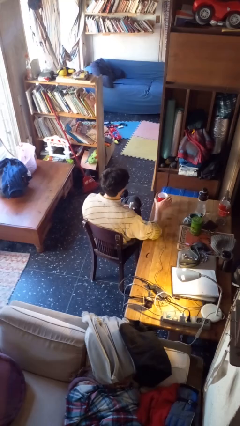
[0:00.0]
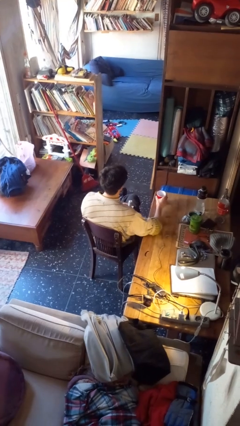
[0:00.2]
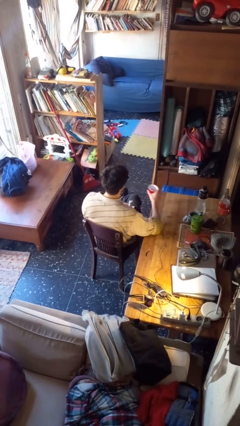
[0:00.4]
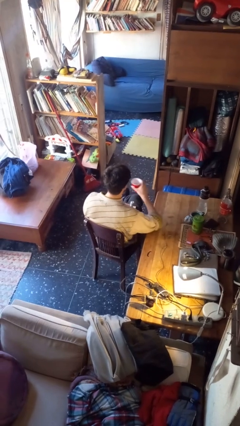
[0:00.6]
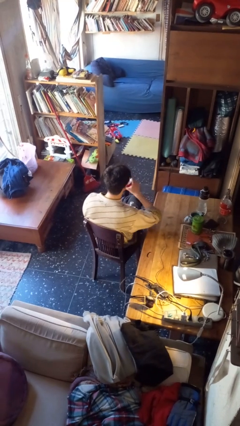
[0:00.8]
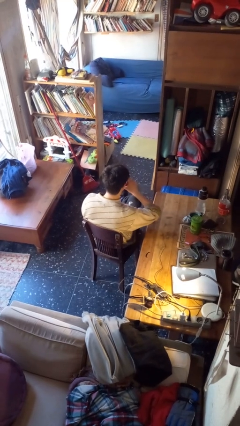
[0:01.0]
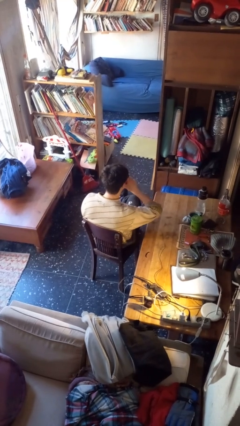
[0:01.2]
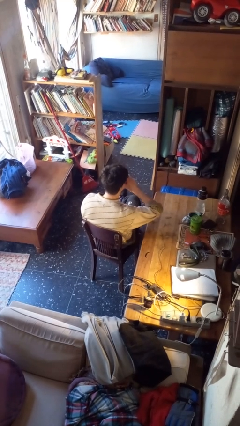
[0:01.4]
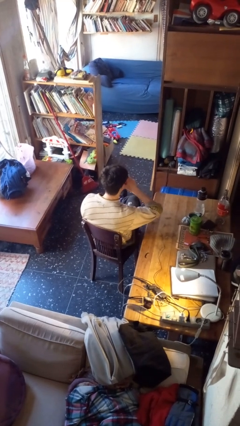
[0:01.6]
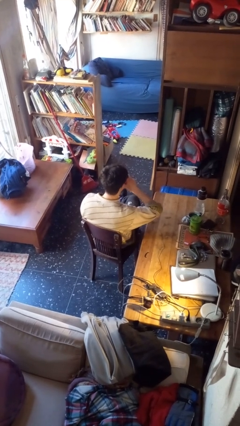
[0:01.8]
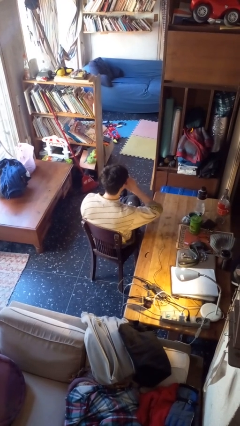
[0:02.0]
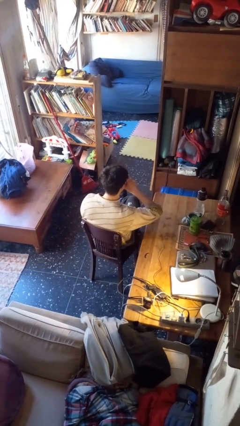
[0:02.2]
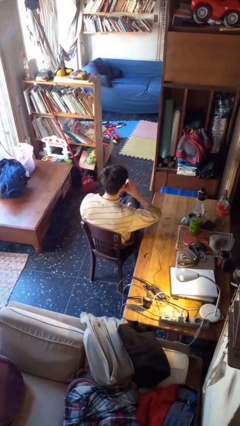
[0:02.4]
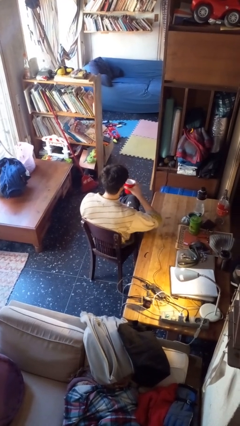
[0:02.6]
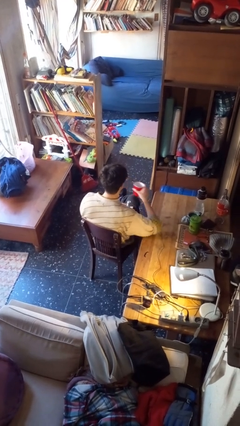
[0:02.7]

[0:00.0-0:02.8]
person drinks from cup

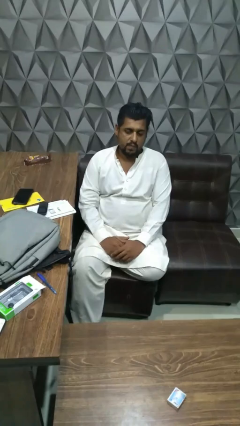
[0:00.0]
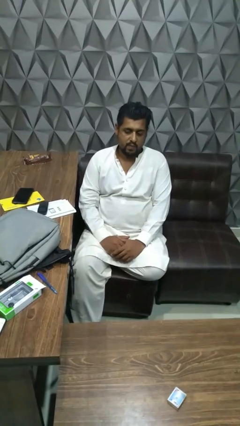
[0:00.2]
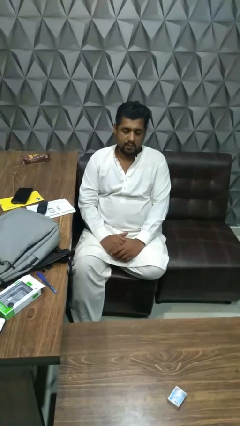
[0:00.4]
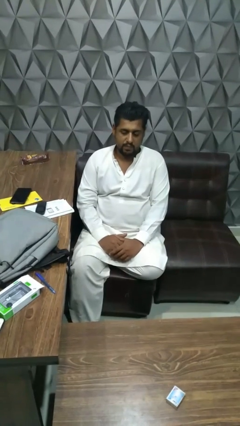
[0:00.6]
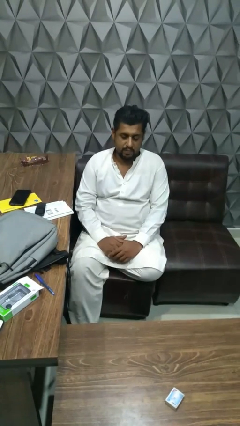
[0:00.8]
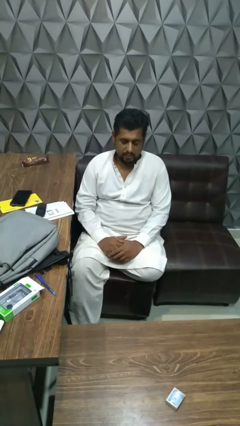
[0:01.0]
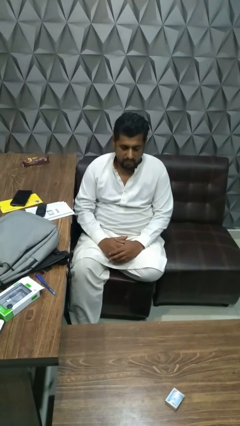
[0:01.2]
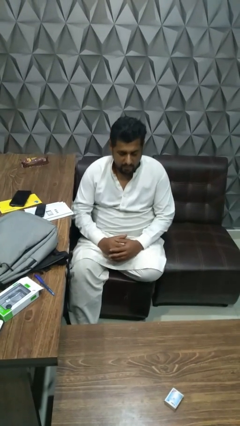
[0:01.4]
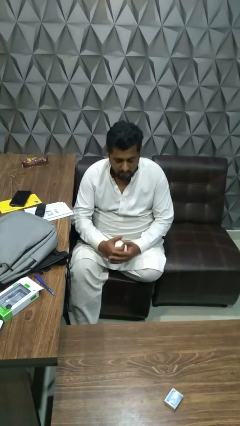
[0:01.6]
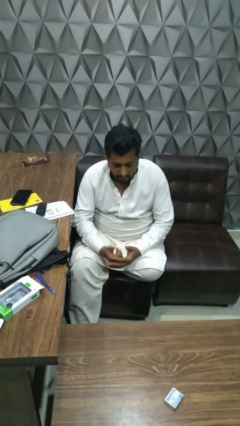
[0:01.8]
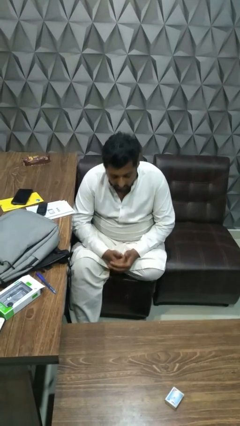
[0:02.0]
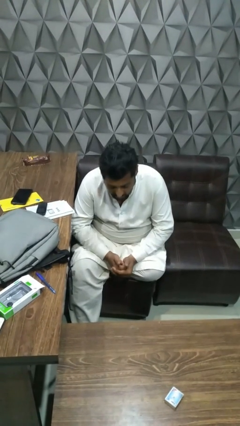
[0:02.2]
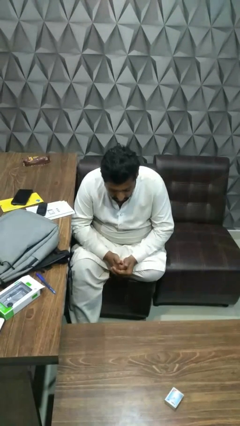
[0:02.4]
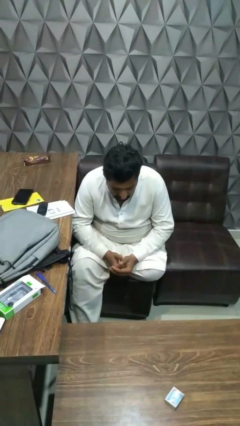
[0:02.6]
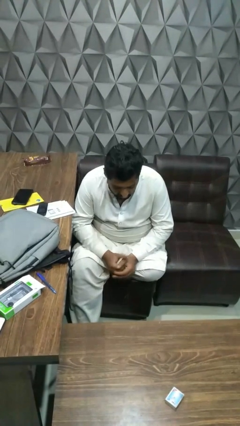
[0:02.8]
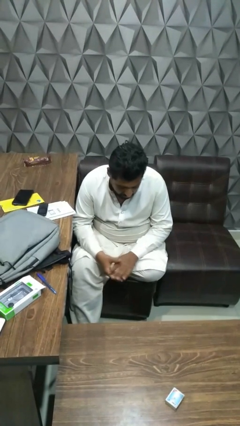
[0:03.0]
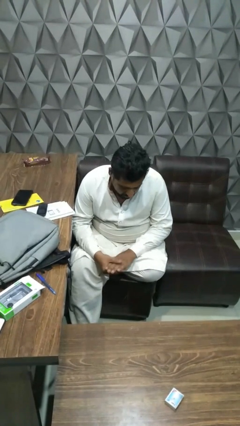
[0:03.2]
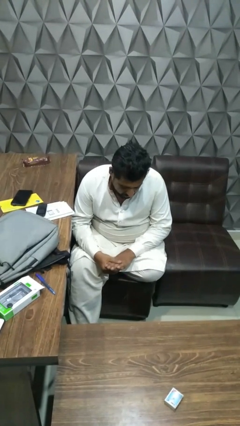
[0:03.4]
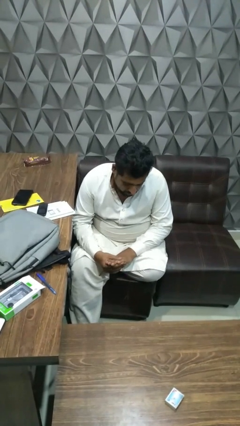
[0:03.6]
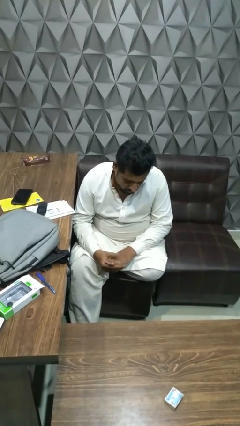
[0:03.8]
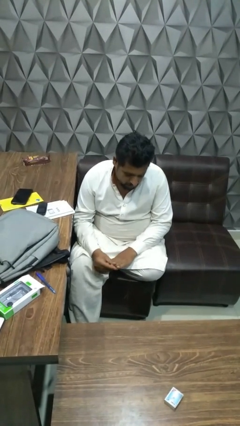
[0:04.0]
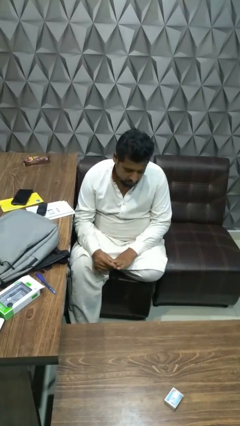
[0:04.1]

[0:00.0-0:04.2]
person looks at hands in lap

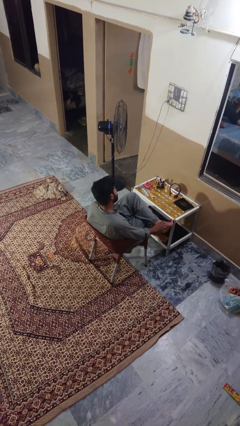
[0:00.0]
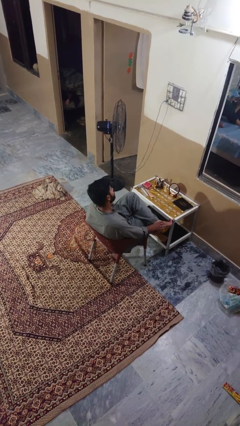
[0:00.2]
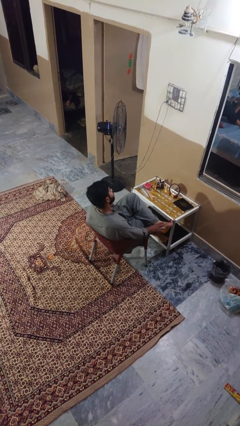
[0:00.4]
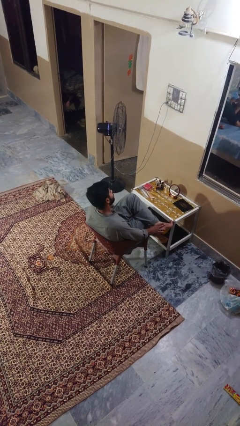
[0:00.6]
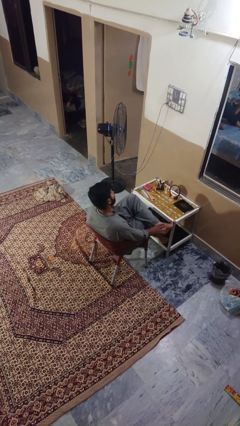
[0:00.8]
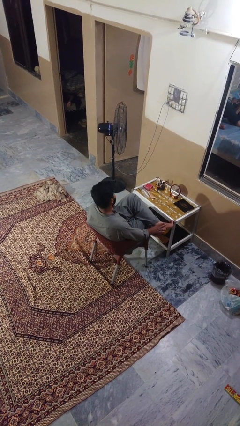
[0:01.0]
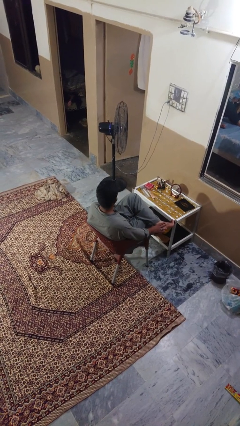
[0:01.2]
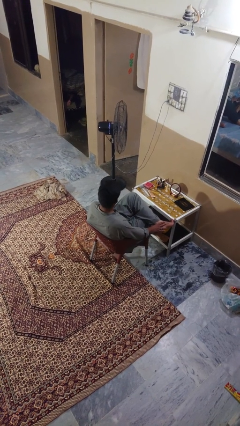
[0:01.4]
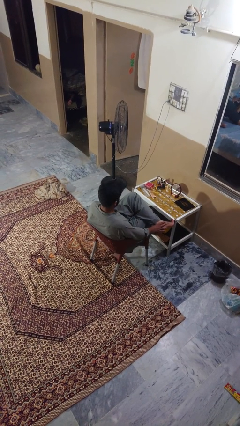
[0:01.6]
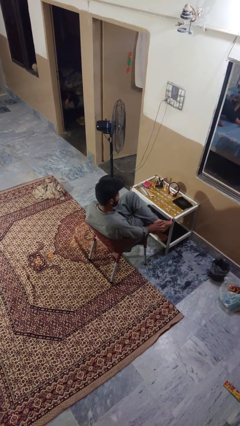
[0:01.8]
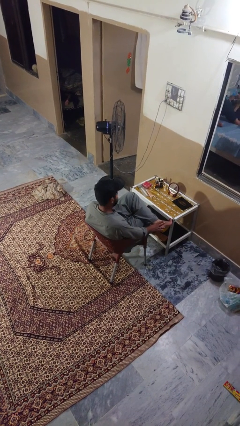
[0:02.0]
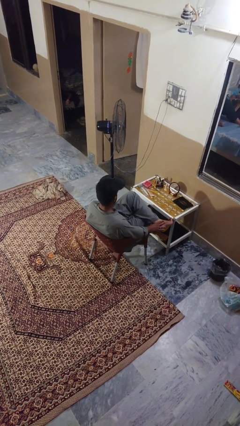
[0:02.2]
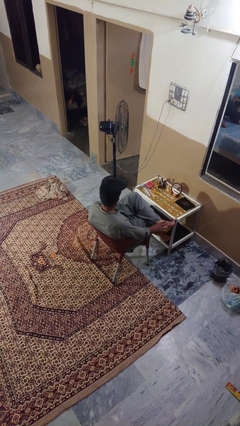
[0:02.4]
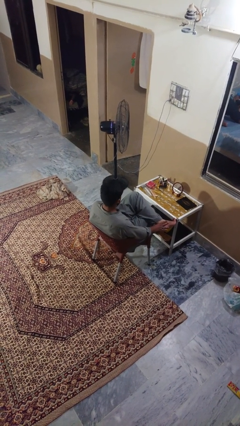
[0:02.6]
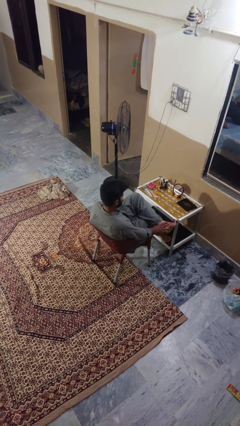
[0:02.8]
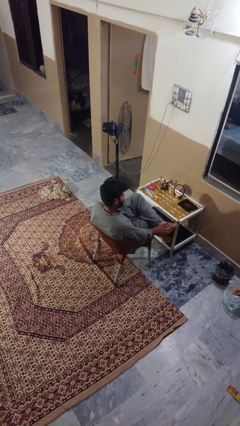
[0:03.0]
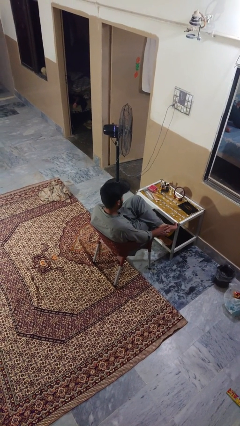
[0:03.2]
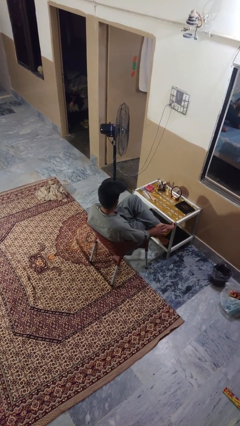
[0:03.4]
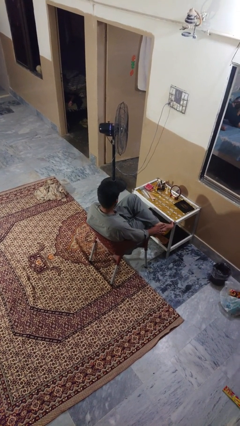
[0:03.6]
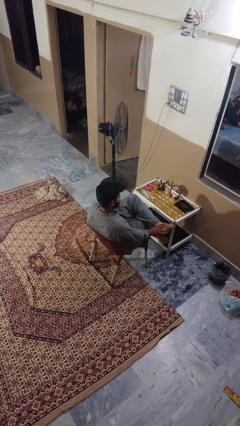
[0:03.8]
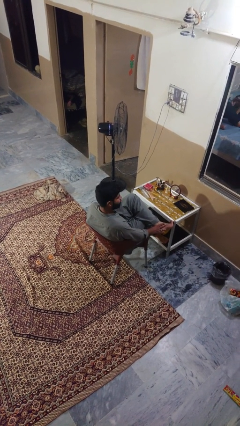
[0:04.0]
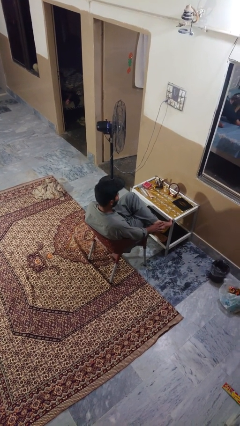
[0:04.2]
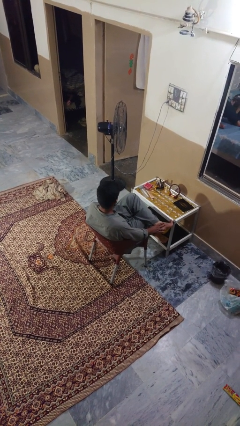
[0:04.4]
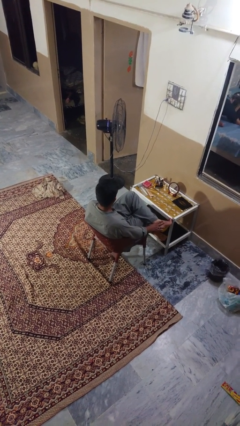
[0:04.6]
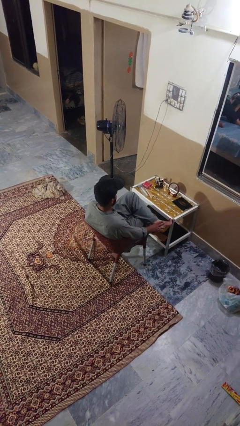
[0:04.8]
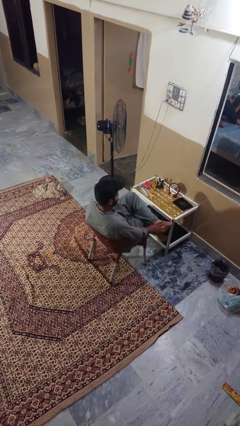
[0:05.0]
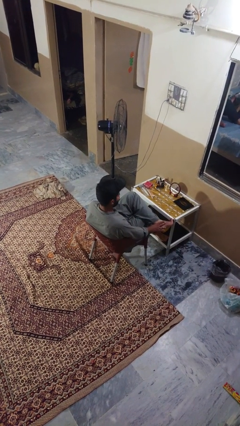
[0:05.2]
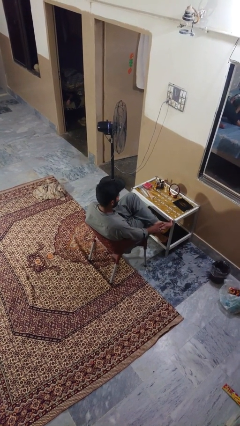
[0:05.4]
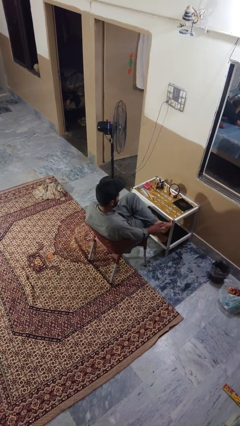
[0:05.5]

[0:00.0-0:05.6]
person shakes head

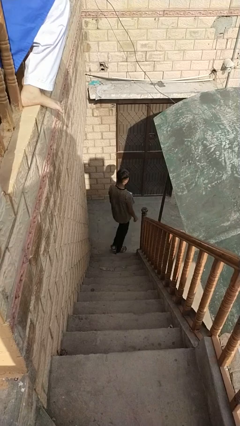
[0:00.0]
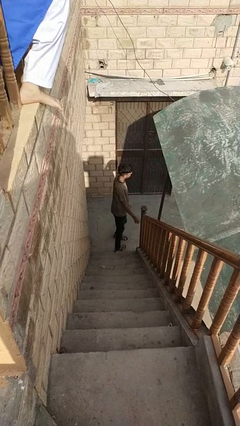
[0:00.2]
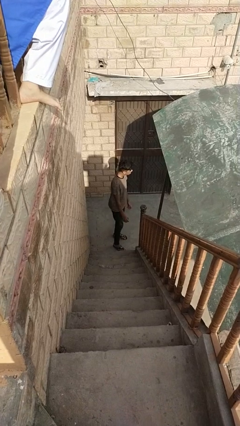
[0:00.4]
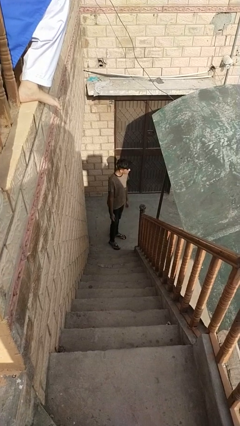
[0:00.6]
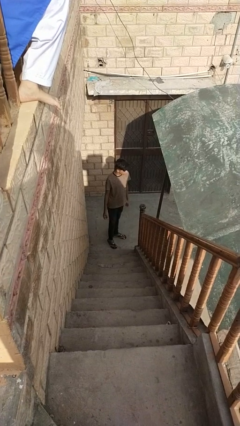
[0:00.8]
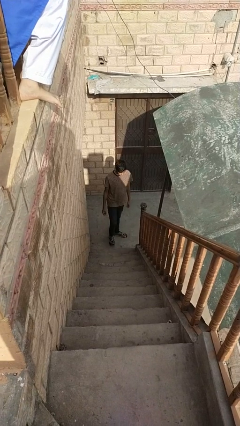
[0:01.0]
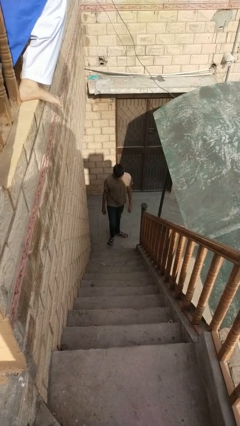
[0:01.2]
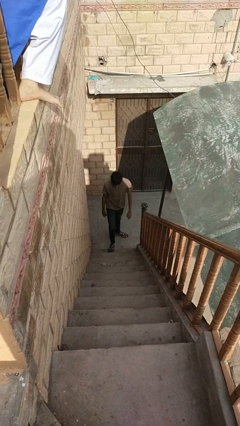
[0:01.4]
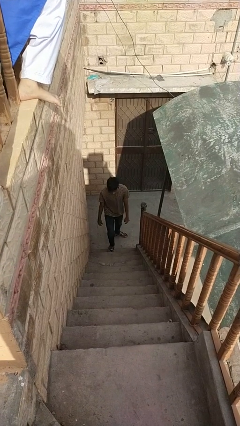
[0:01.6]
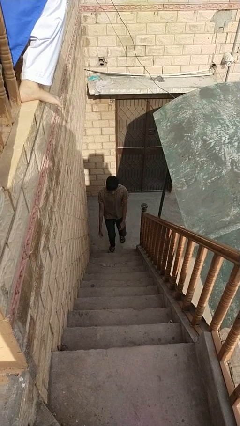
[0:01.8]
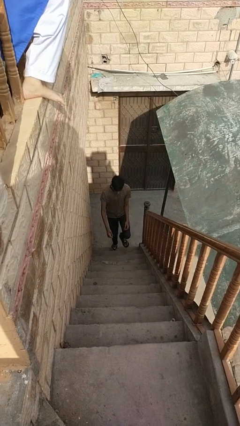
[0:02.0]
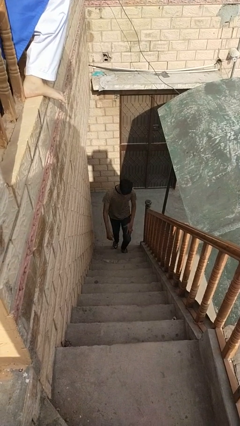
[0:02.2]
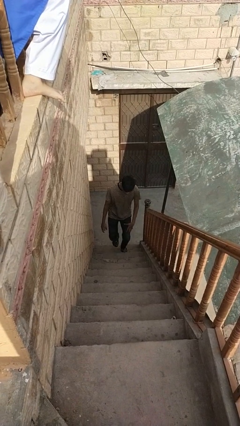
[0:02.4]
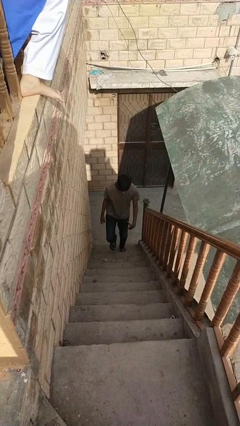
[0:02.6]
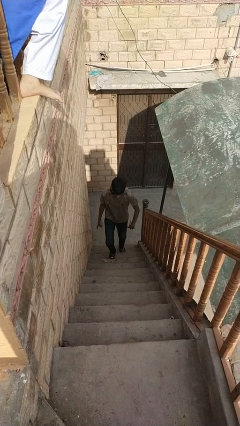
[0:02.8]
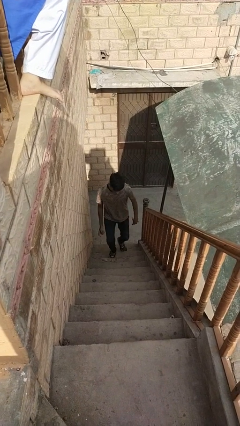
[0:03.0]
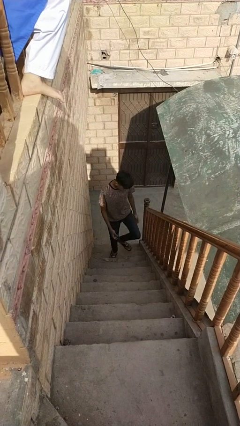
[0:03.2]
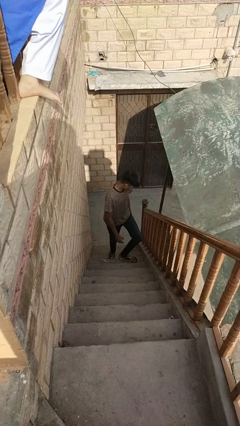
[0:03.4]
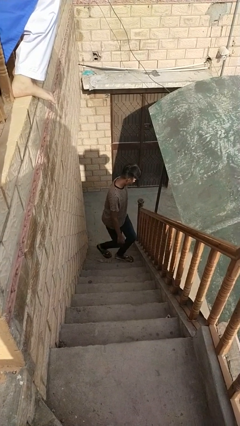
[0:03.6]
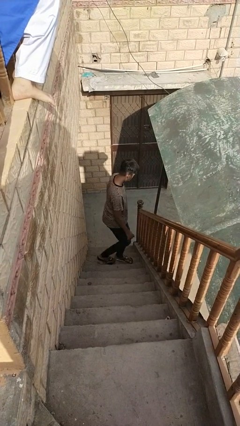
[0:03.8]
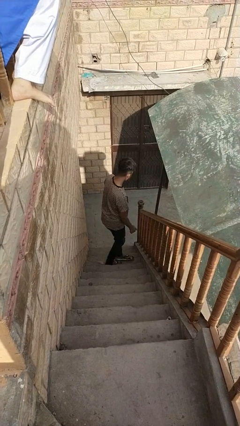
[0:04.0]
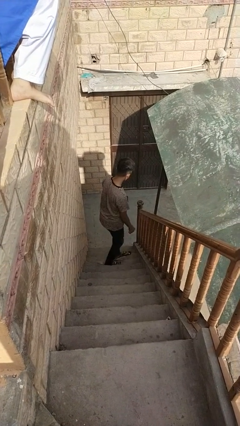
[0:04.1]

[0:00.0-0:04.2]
person climbs up stairs

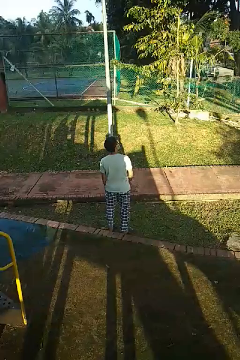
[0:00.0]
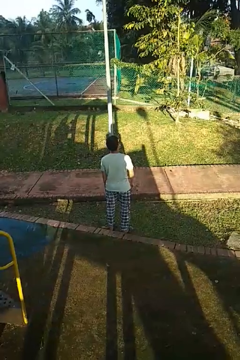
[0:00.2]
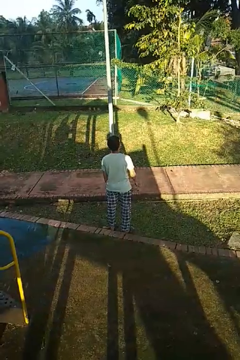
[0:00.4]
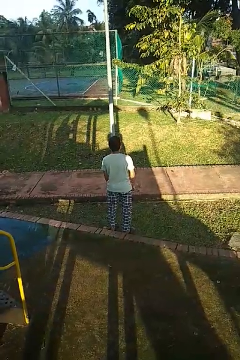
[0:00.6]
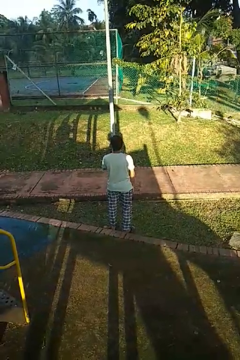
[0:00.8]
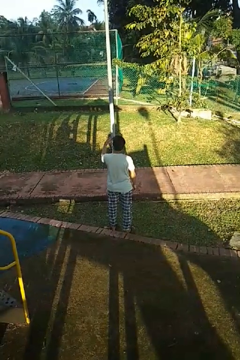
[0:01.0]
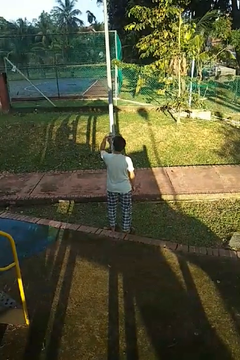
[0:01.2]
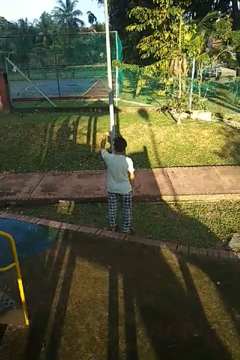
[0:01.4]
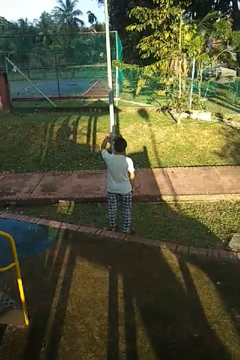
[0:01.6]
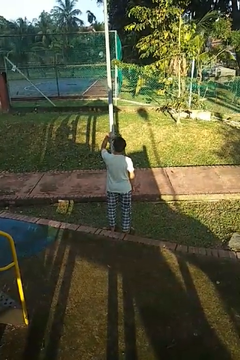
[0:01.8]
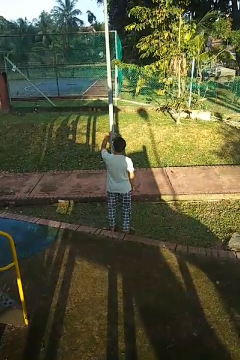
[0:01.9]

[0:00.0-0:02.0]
person gestures watch closely
